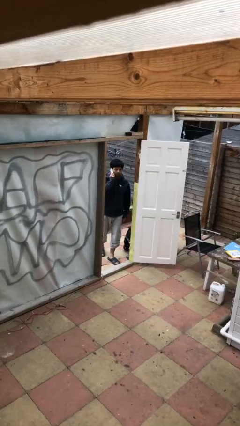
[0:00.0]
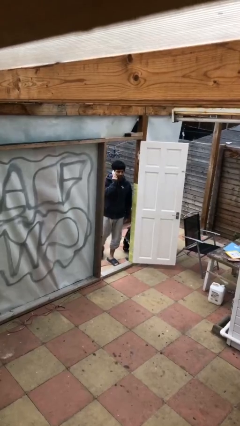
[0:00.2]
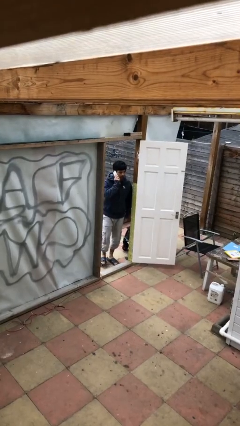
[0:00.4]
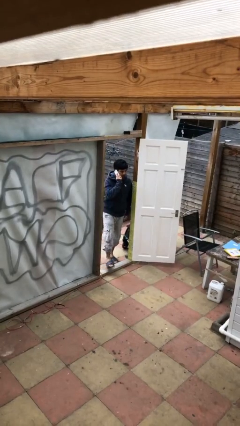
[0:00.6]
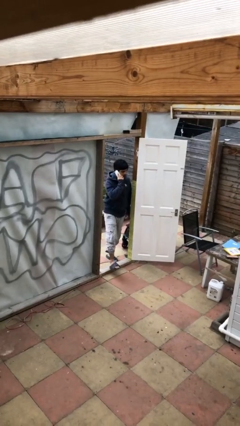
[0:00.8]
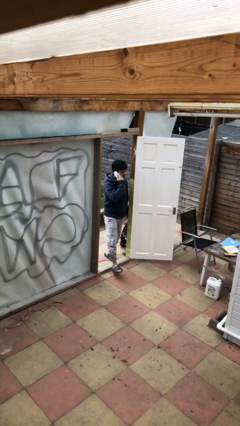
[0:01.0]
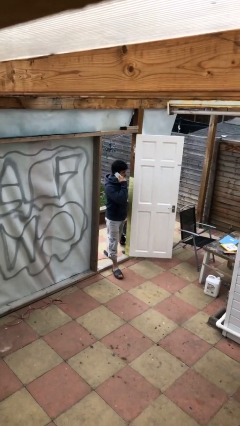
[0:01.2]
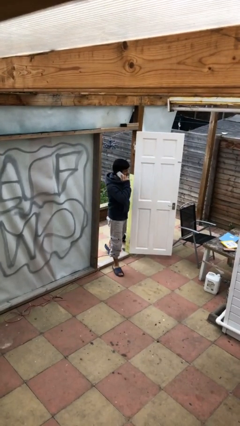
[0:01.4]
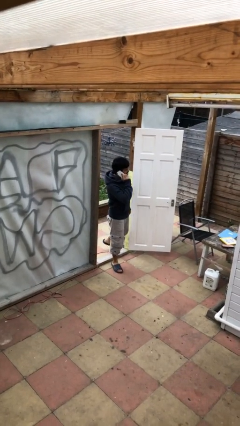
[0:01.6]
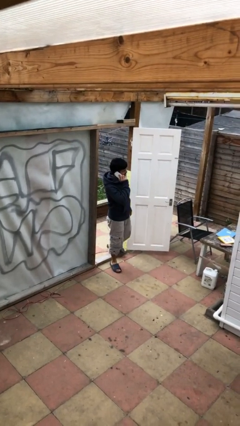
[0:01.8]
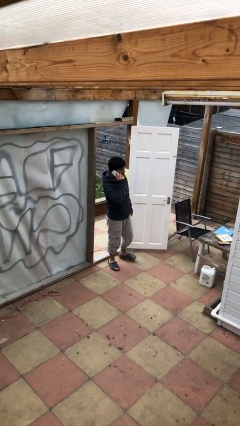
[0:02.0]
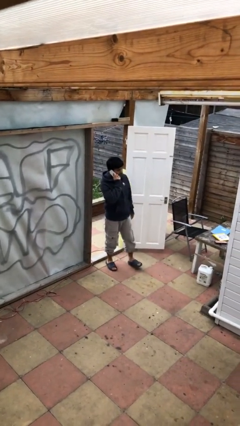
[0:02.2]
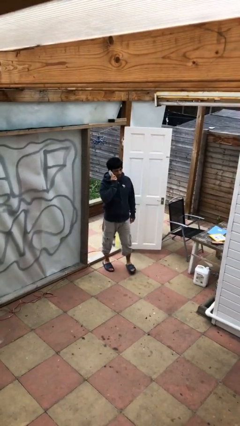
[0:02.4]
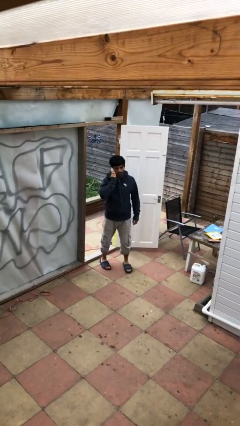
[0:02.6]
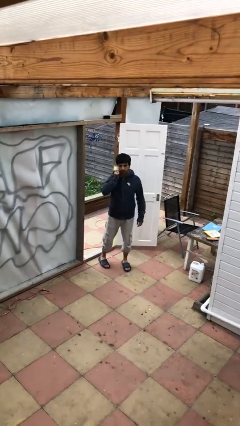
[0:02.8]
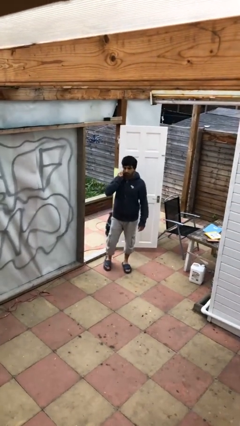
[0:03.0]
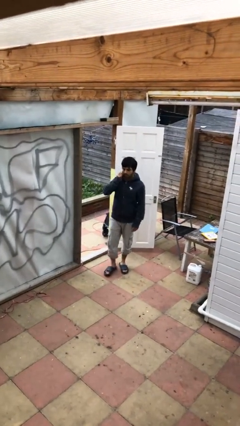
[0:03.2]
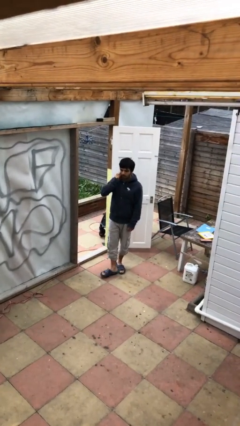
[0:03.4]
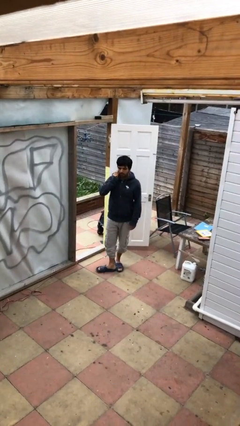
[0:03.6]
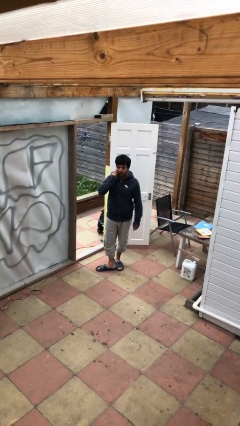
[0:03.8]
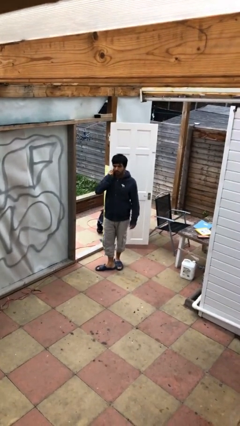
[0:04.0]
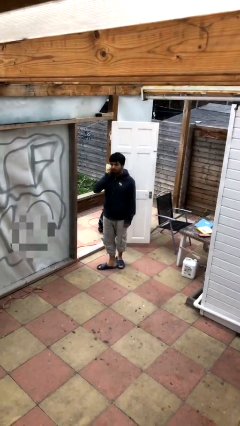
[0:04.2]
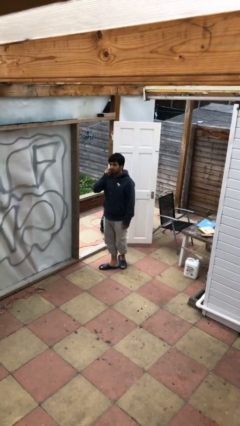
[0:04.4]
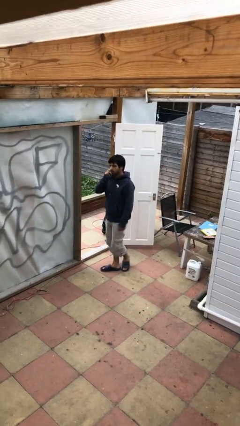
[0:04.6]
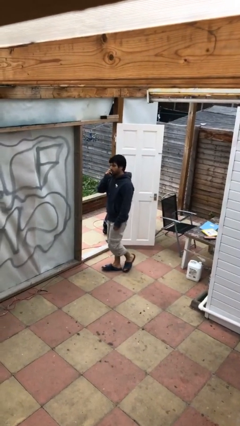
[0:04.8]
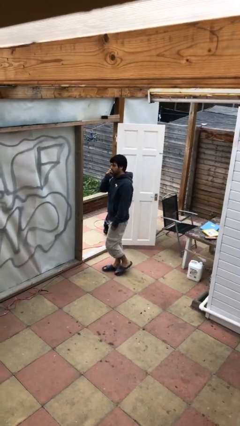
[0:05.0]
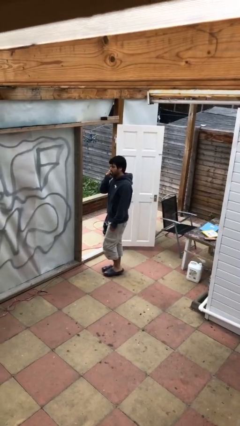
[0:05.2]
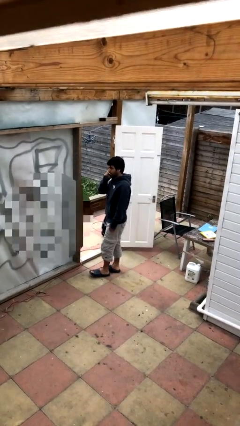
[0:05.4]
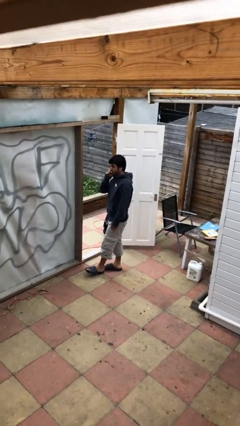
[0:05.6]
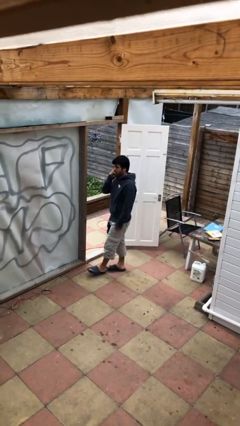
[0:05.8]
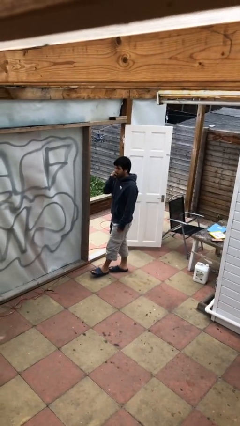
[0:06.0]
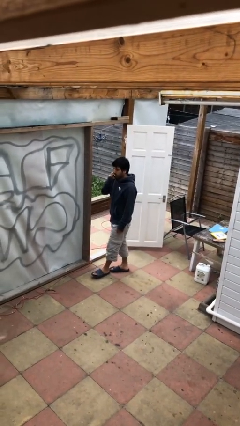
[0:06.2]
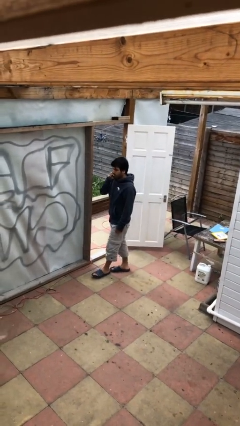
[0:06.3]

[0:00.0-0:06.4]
person enters scene through structure

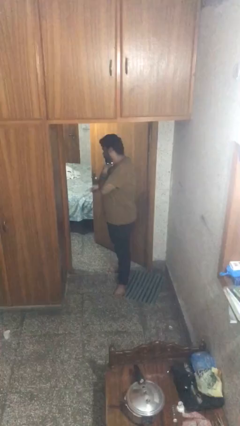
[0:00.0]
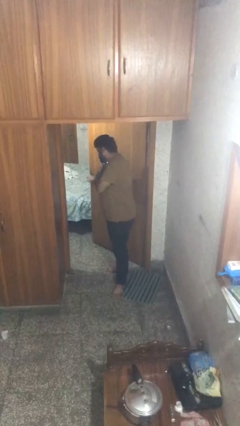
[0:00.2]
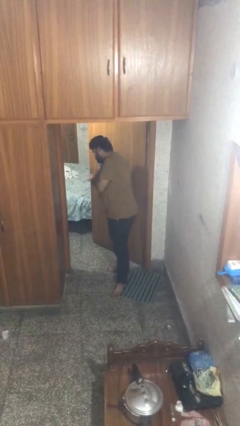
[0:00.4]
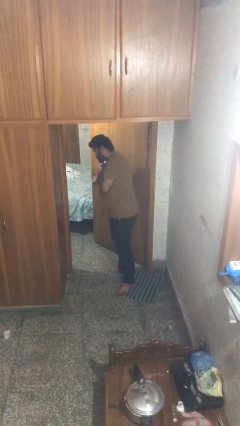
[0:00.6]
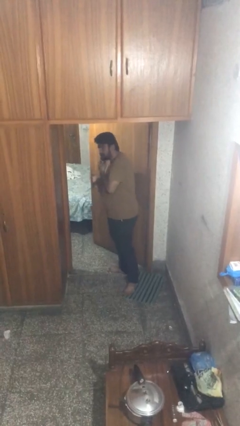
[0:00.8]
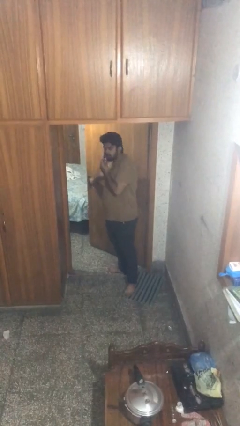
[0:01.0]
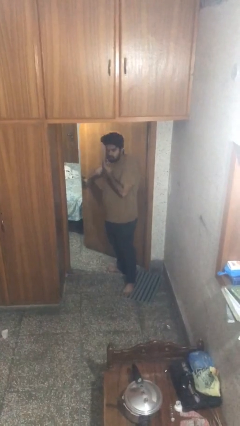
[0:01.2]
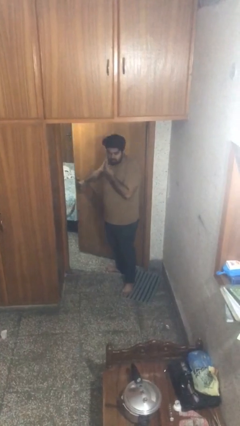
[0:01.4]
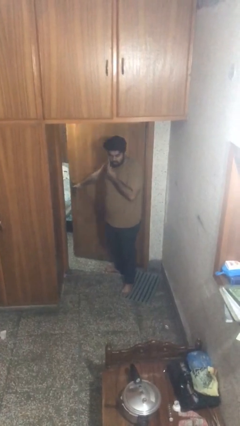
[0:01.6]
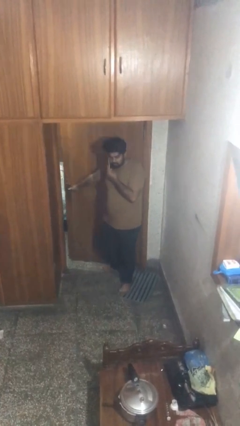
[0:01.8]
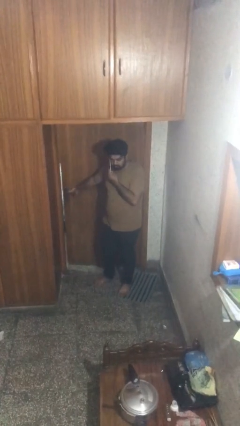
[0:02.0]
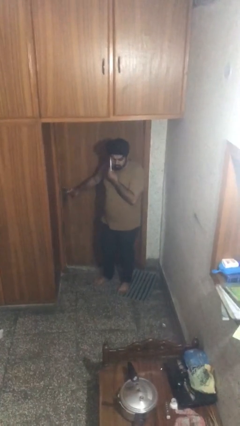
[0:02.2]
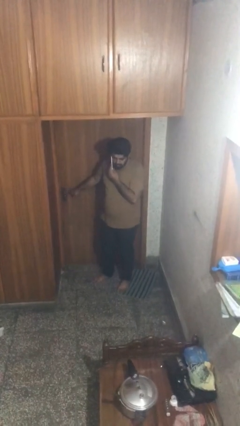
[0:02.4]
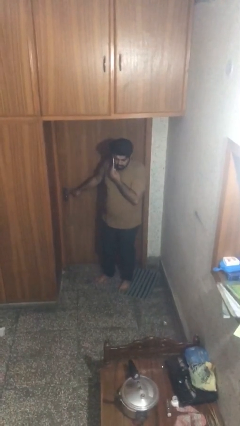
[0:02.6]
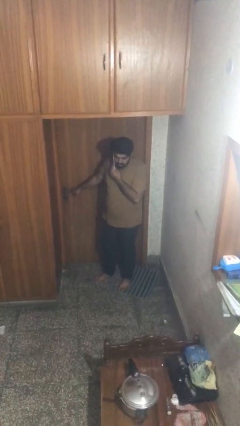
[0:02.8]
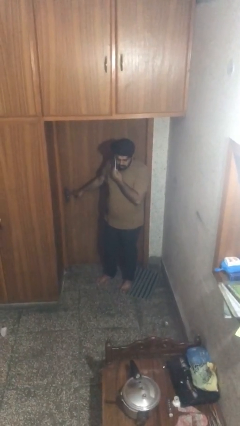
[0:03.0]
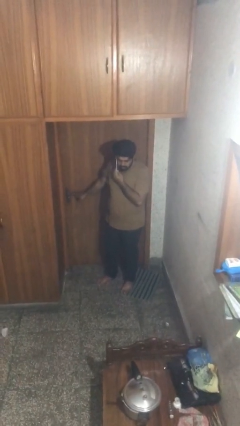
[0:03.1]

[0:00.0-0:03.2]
person closes facility door

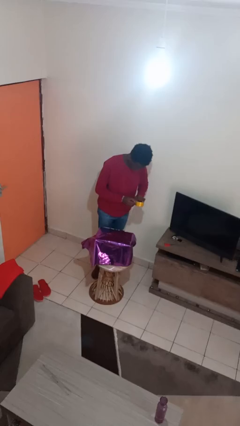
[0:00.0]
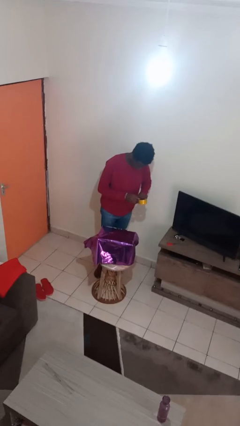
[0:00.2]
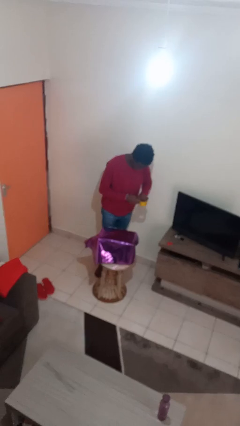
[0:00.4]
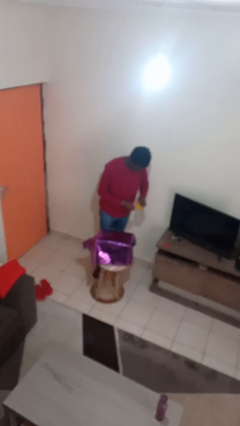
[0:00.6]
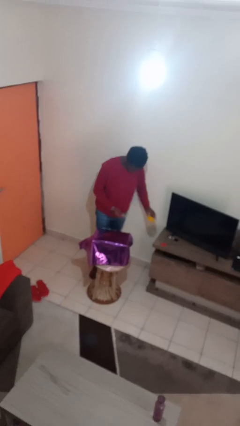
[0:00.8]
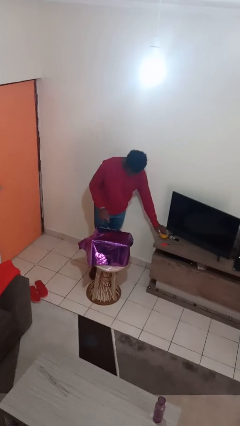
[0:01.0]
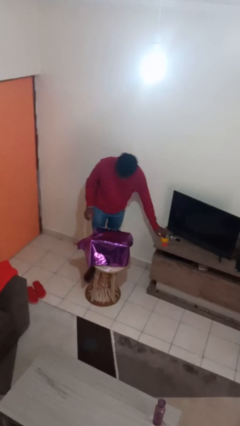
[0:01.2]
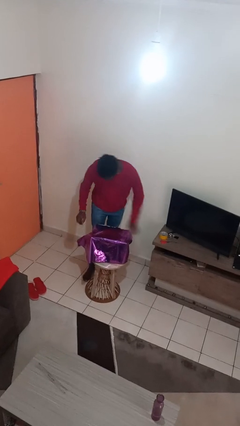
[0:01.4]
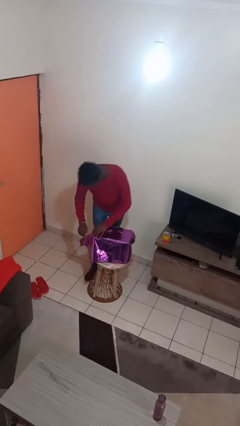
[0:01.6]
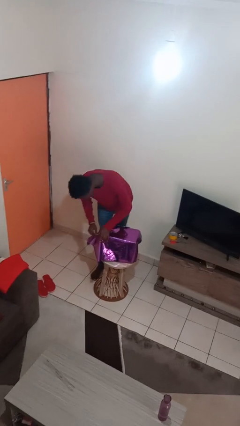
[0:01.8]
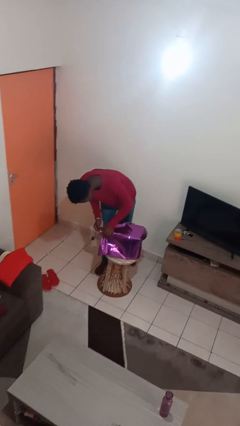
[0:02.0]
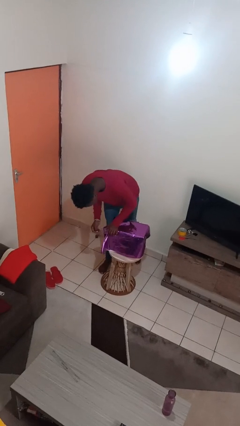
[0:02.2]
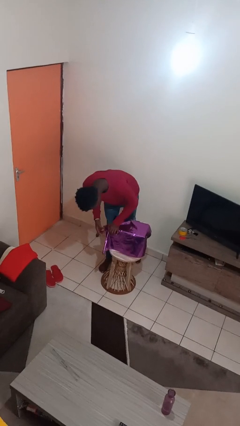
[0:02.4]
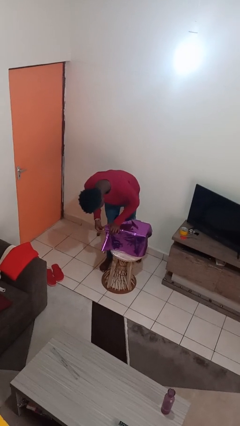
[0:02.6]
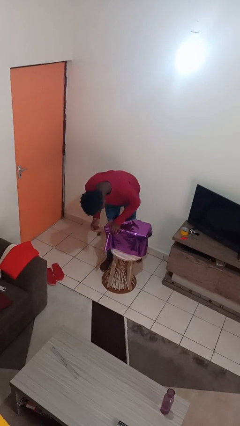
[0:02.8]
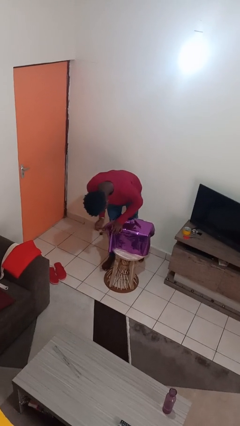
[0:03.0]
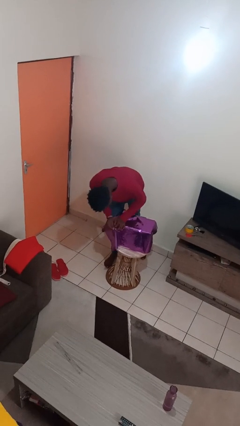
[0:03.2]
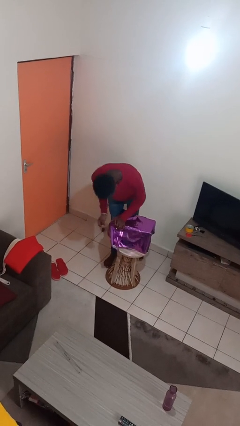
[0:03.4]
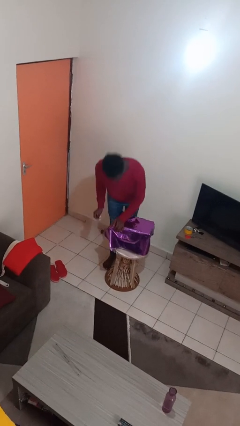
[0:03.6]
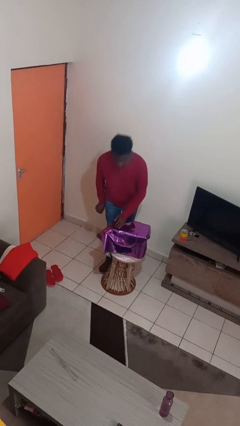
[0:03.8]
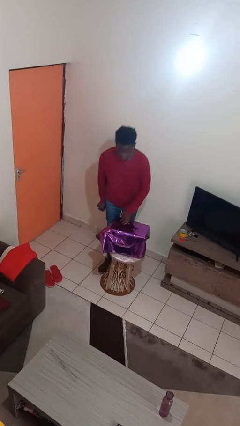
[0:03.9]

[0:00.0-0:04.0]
person wraps box

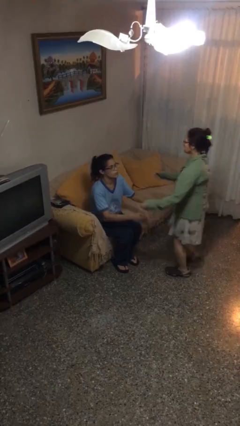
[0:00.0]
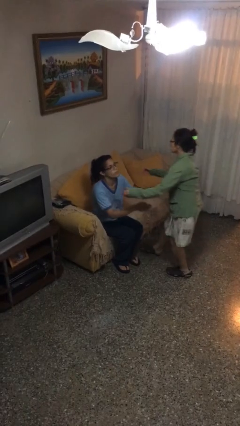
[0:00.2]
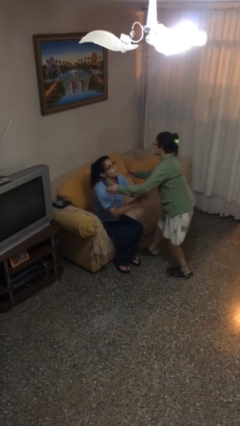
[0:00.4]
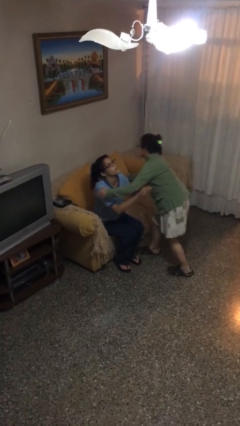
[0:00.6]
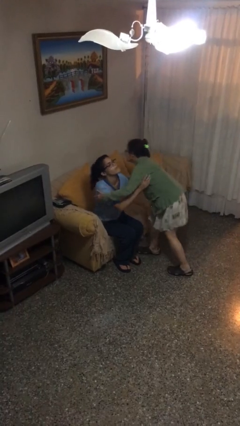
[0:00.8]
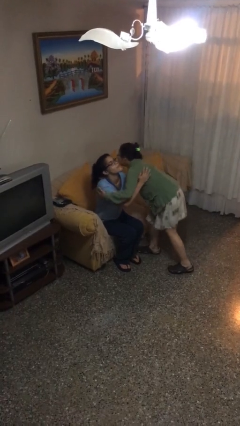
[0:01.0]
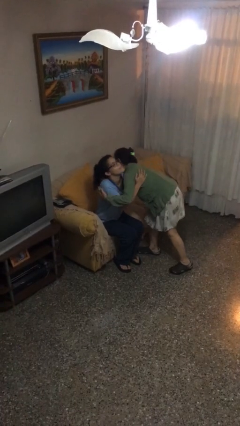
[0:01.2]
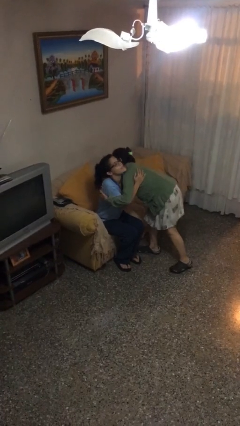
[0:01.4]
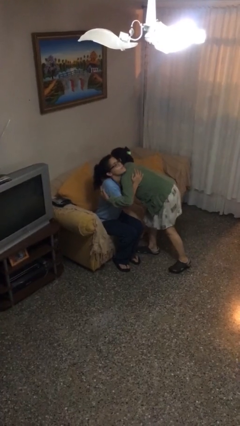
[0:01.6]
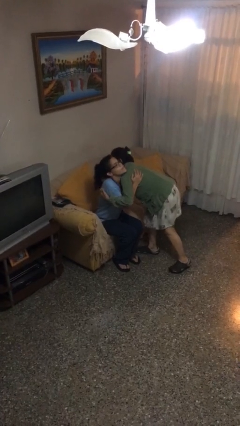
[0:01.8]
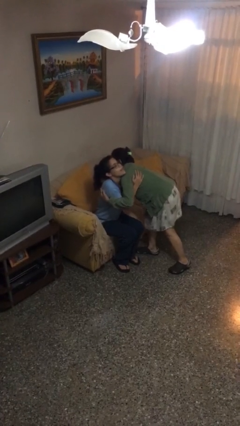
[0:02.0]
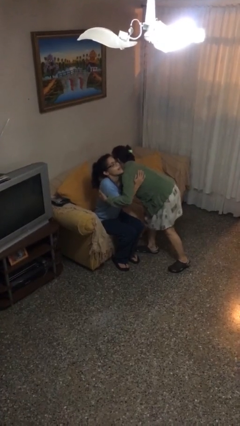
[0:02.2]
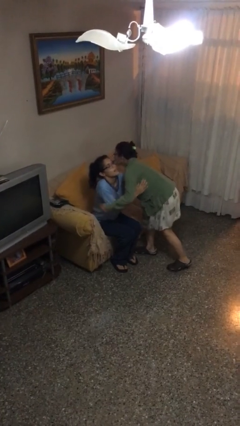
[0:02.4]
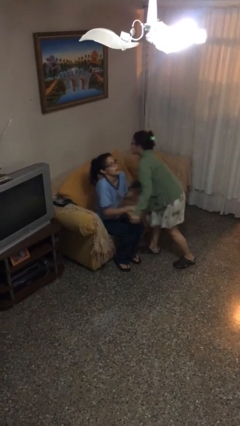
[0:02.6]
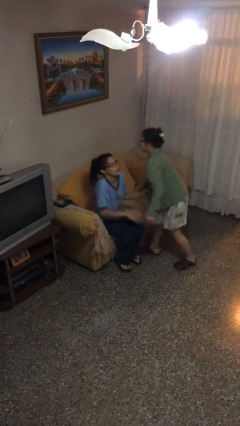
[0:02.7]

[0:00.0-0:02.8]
person embraces person

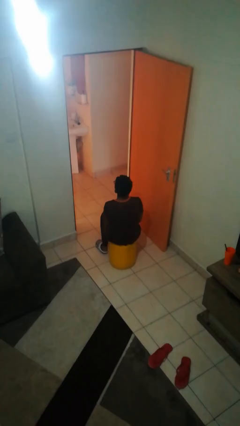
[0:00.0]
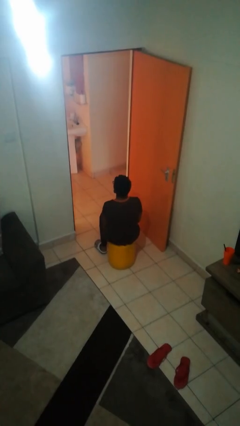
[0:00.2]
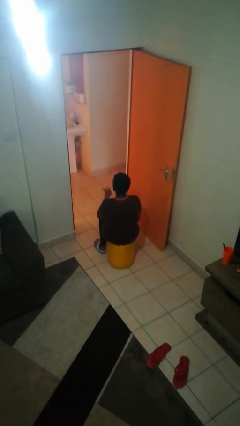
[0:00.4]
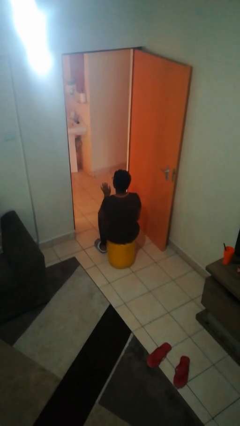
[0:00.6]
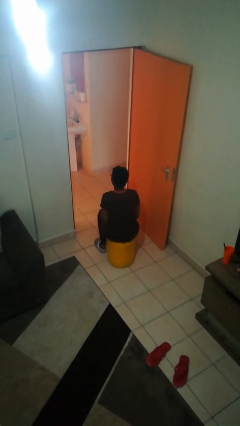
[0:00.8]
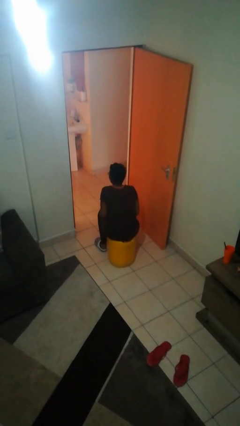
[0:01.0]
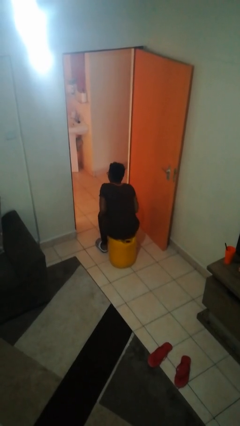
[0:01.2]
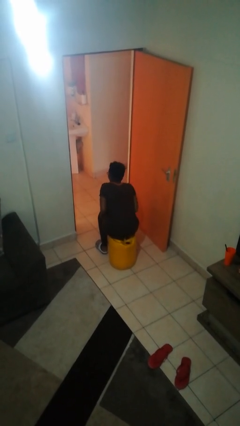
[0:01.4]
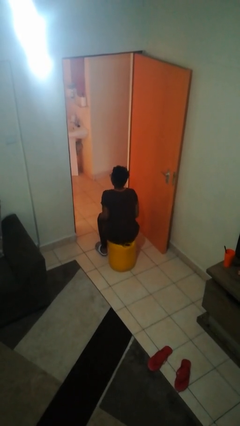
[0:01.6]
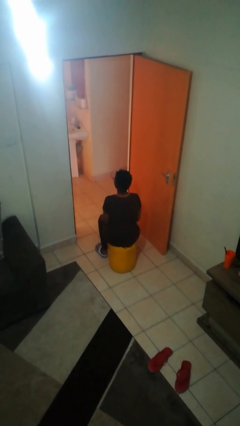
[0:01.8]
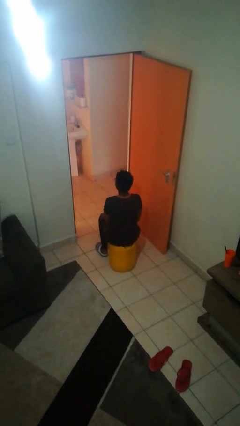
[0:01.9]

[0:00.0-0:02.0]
person slaps hands on thighs
